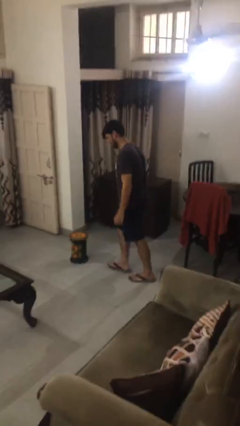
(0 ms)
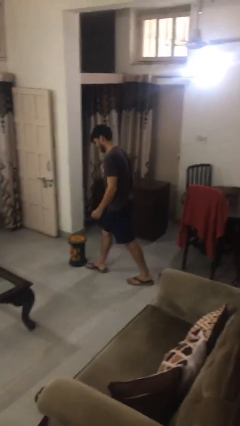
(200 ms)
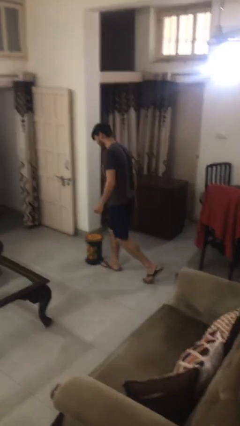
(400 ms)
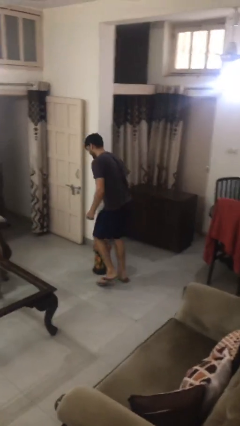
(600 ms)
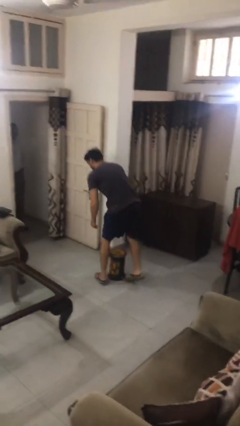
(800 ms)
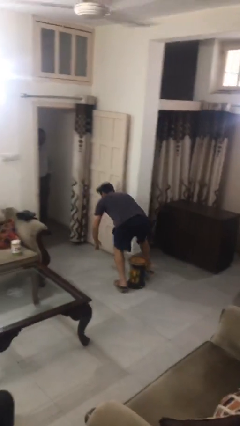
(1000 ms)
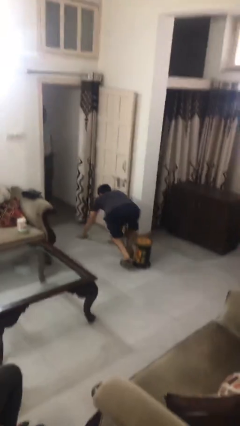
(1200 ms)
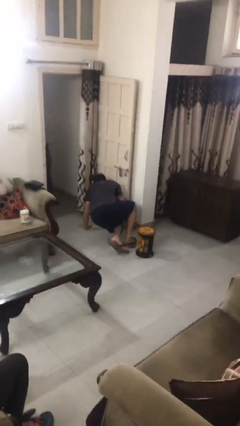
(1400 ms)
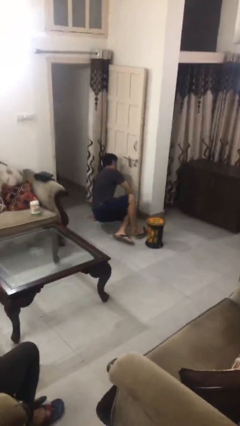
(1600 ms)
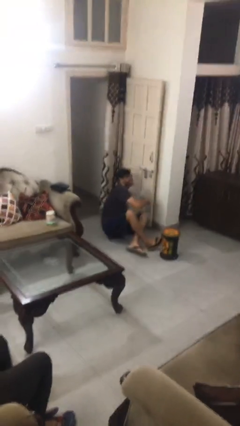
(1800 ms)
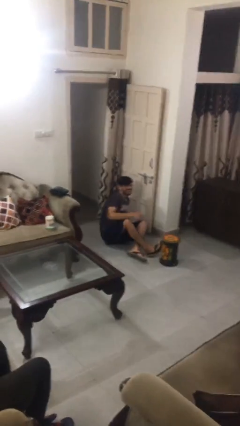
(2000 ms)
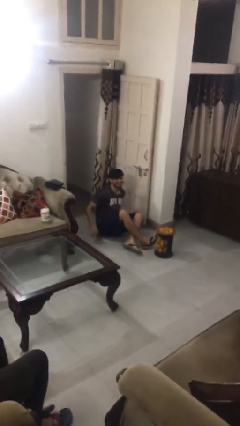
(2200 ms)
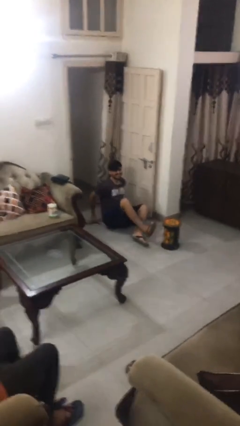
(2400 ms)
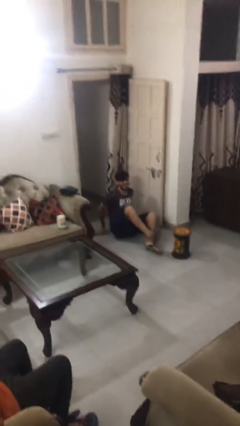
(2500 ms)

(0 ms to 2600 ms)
person trips on object on floor

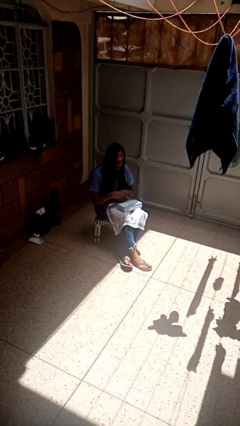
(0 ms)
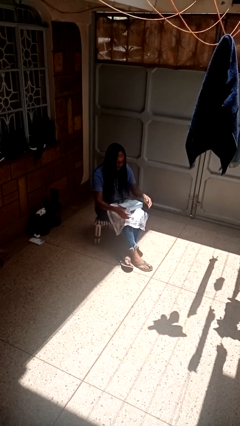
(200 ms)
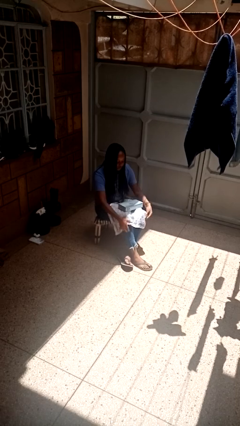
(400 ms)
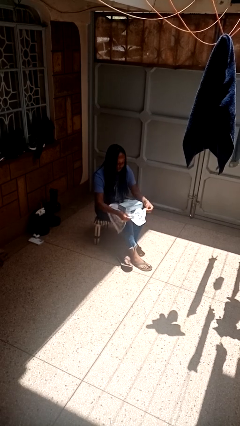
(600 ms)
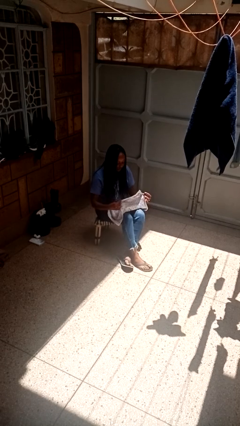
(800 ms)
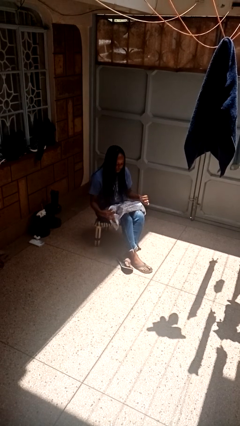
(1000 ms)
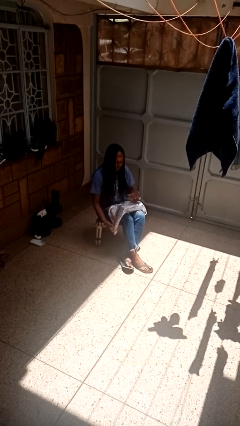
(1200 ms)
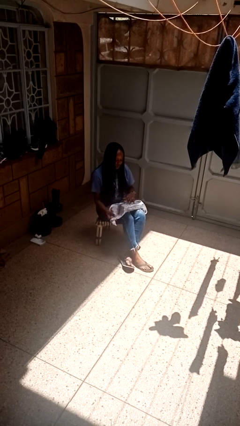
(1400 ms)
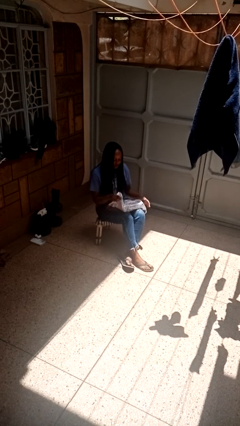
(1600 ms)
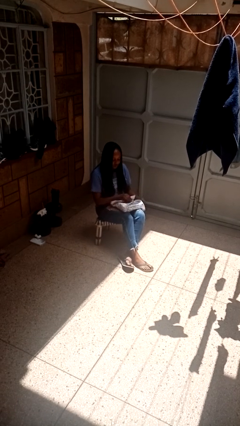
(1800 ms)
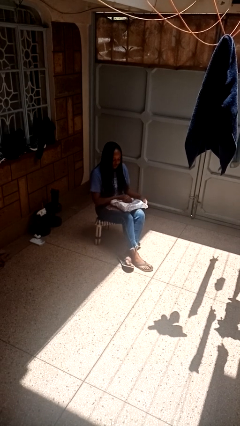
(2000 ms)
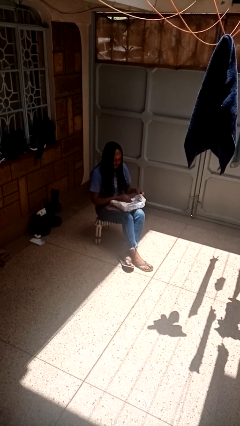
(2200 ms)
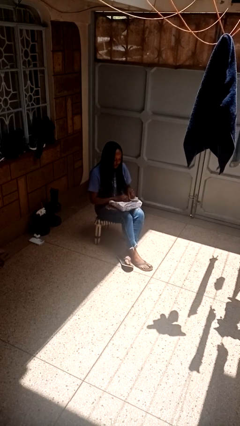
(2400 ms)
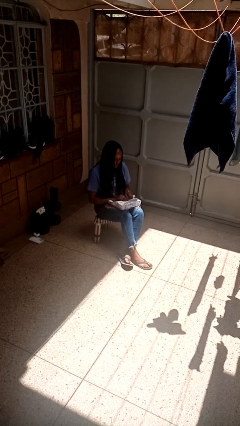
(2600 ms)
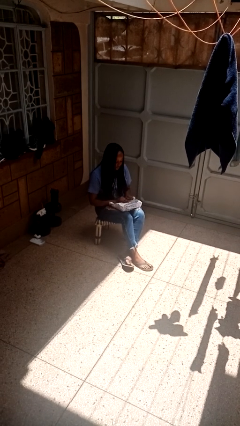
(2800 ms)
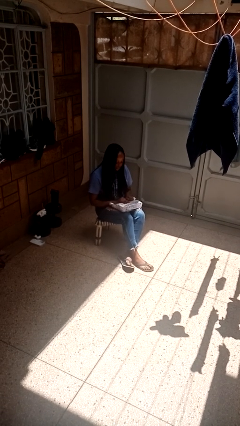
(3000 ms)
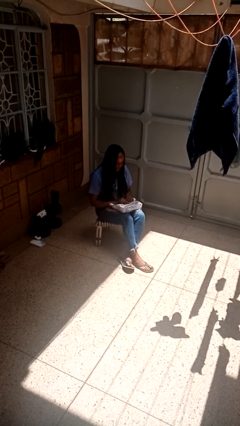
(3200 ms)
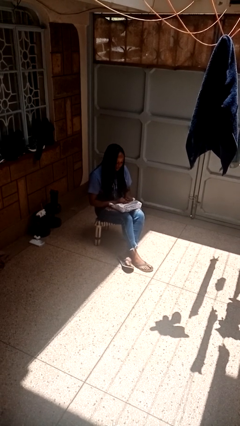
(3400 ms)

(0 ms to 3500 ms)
person wraps box

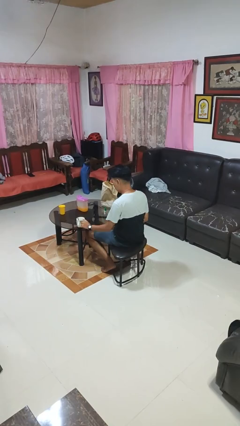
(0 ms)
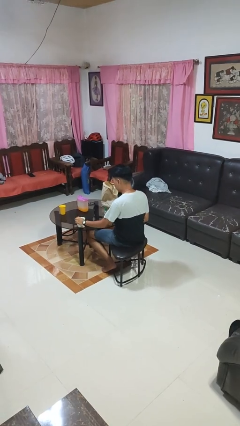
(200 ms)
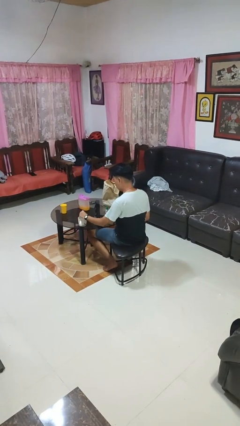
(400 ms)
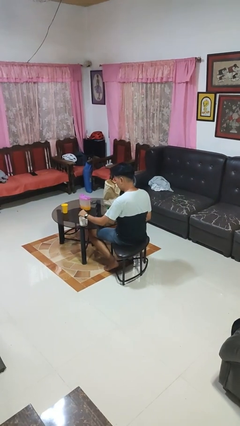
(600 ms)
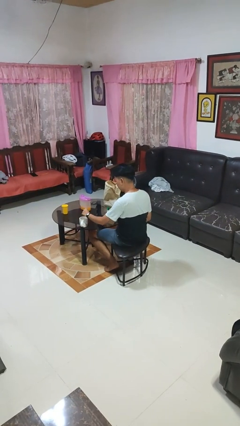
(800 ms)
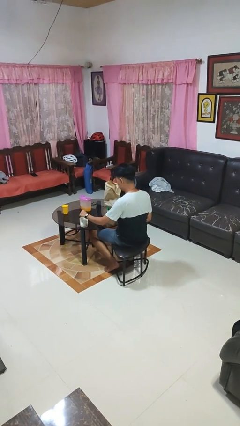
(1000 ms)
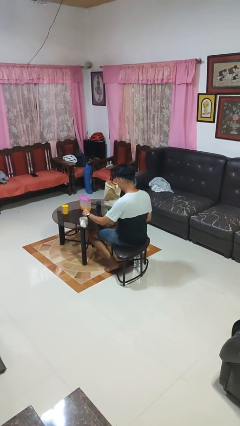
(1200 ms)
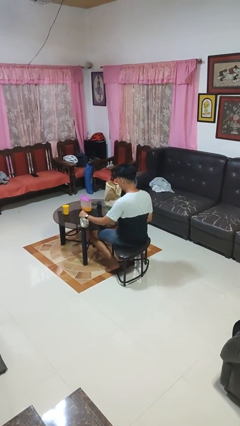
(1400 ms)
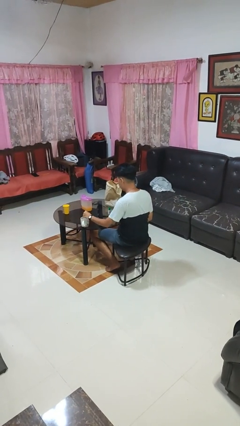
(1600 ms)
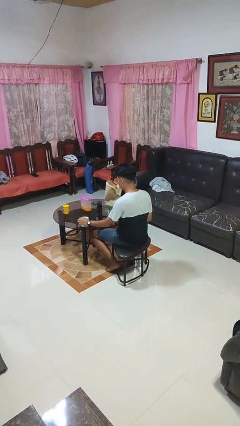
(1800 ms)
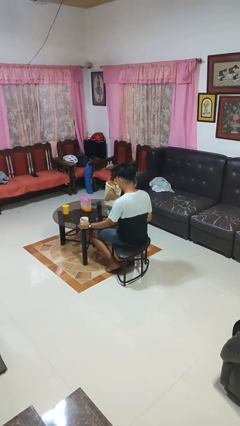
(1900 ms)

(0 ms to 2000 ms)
person stirs mug

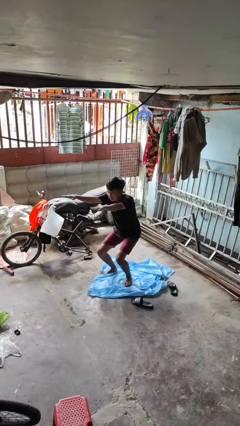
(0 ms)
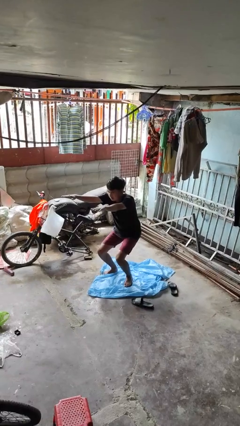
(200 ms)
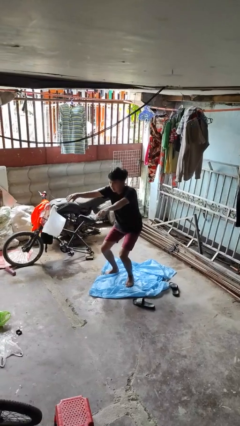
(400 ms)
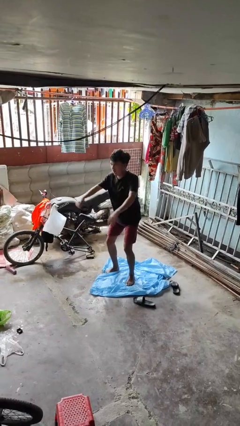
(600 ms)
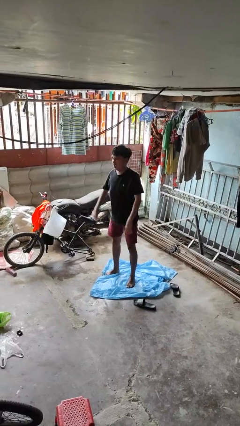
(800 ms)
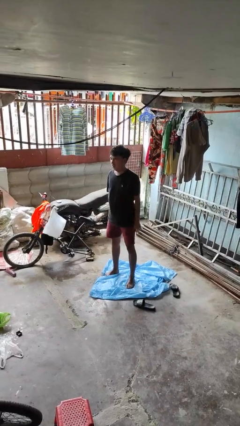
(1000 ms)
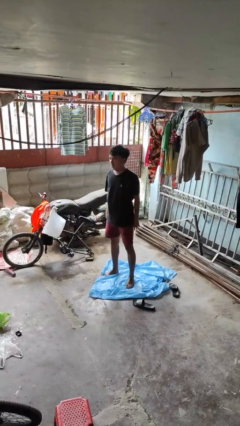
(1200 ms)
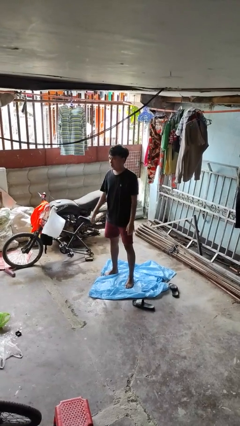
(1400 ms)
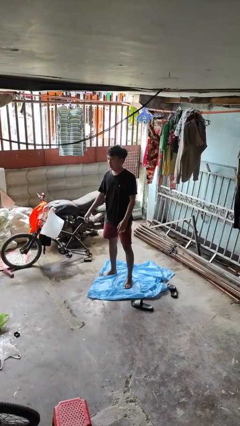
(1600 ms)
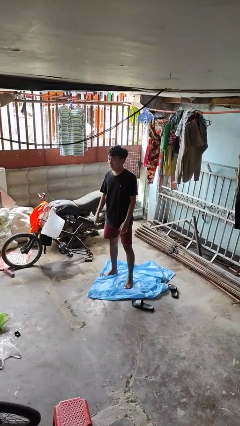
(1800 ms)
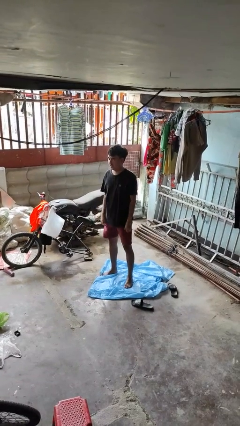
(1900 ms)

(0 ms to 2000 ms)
person stands up

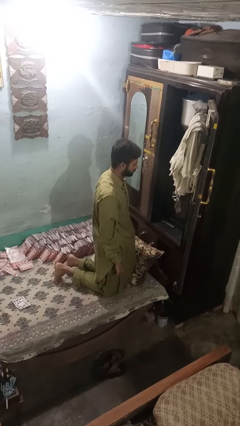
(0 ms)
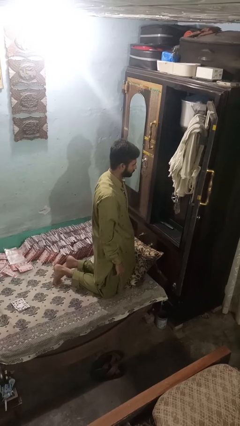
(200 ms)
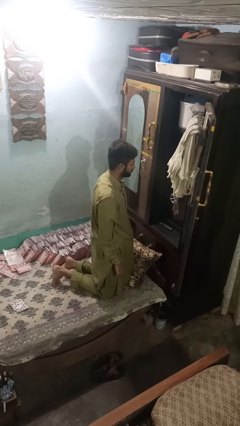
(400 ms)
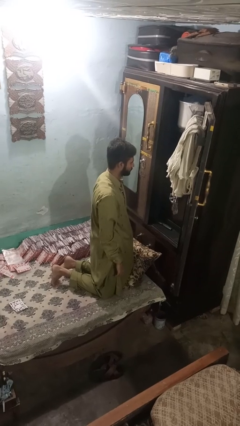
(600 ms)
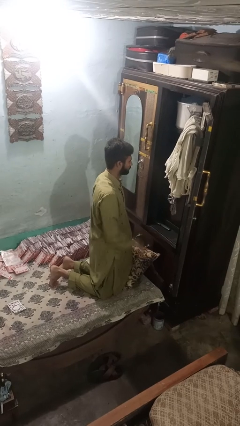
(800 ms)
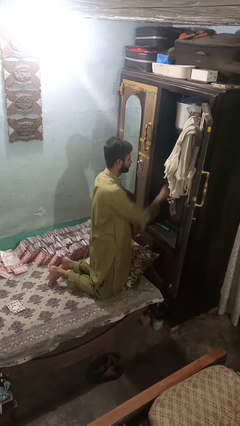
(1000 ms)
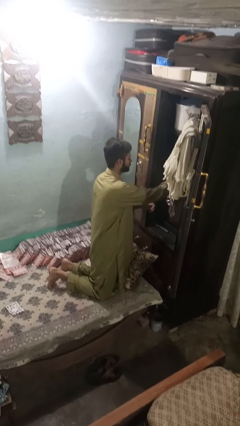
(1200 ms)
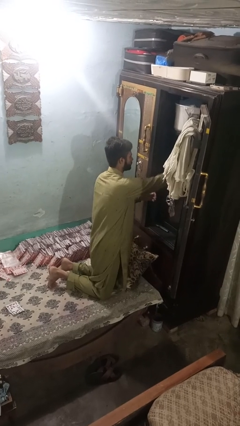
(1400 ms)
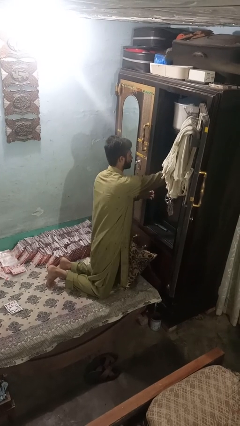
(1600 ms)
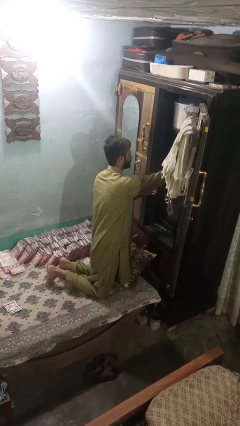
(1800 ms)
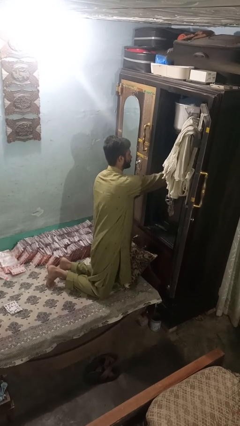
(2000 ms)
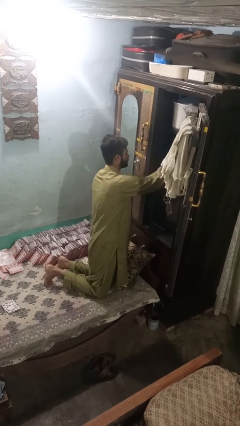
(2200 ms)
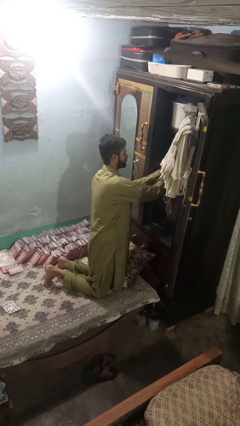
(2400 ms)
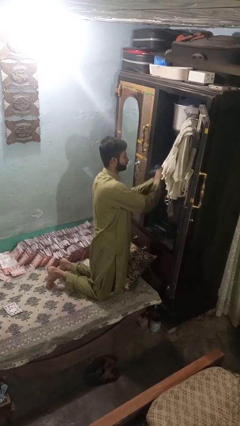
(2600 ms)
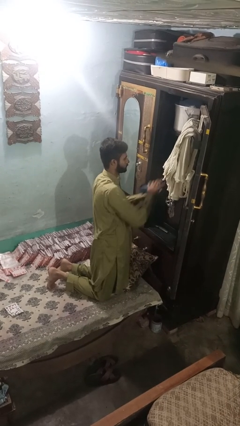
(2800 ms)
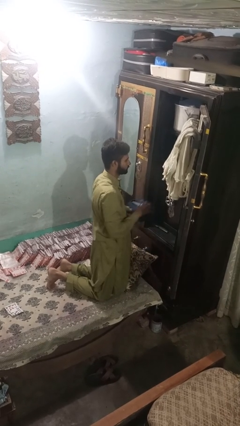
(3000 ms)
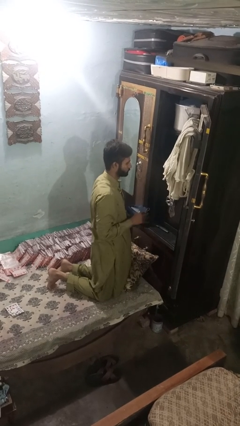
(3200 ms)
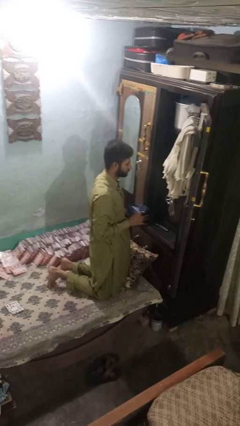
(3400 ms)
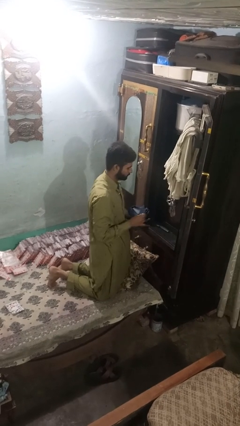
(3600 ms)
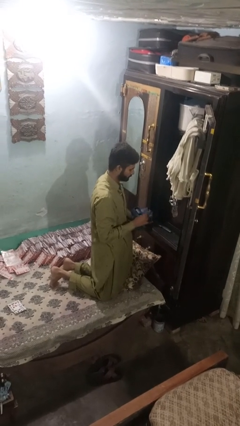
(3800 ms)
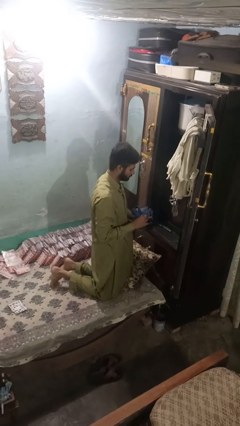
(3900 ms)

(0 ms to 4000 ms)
person takes clothes from dresser

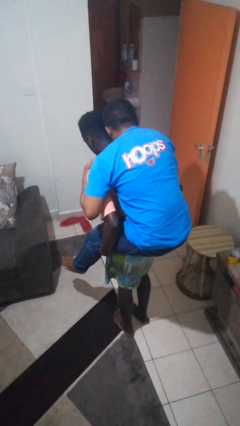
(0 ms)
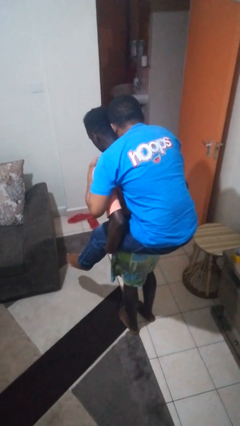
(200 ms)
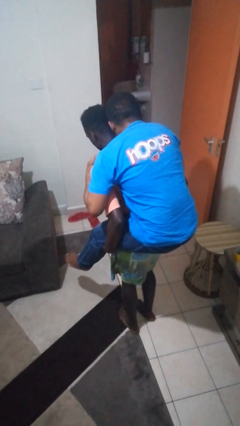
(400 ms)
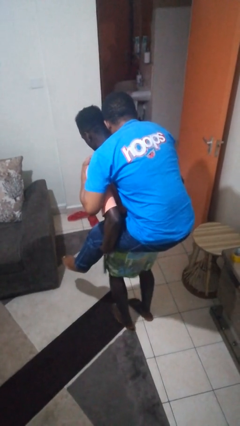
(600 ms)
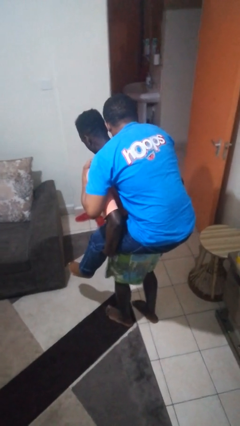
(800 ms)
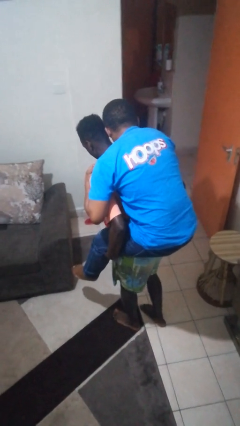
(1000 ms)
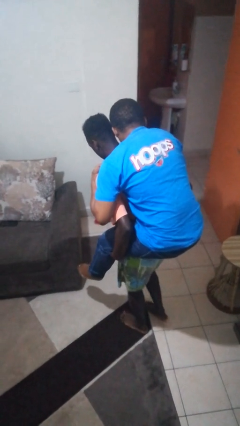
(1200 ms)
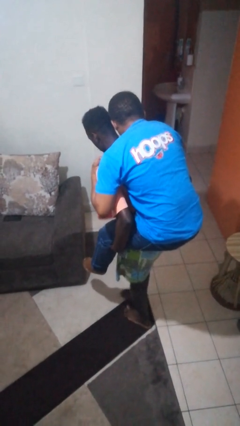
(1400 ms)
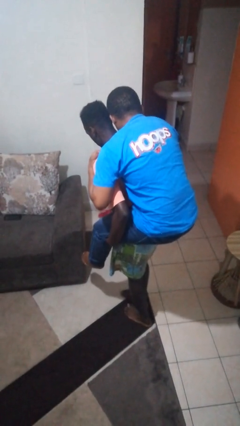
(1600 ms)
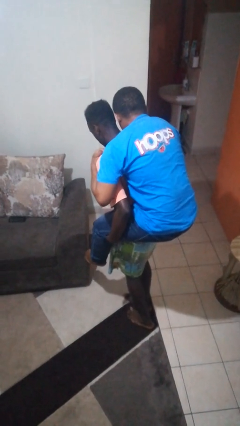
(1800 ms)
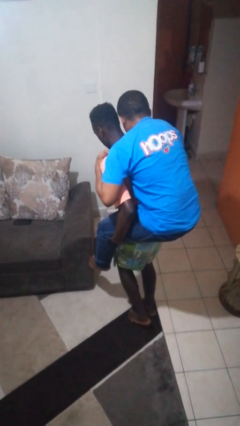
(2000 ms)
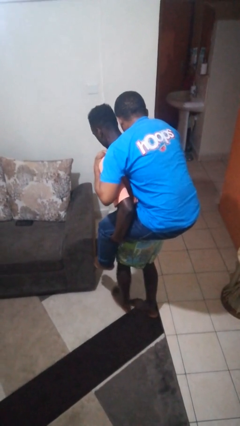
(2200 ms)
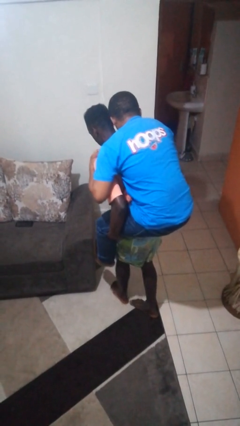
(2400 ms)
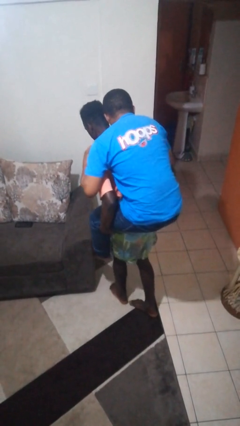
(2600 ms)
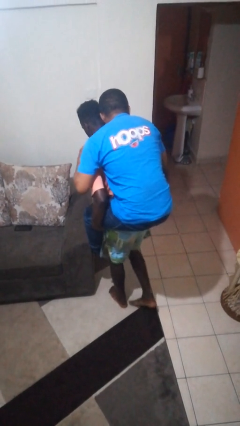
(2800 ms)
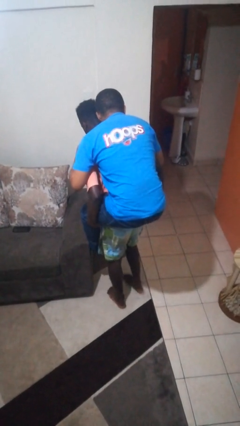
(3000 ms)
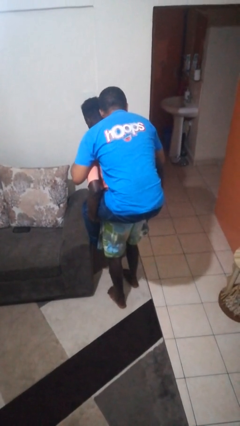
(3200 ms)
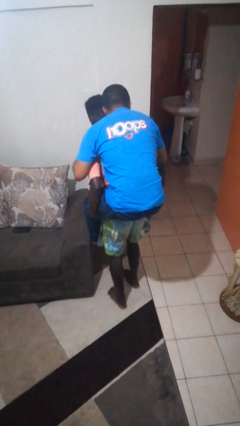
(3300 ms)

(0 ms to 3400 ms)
person carries person on back

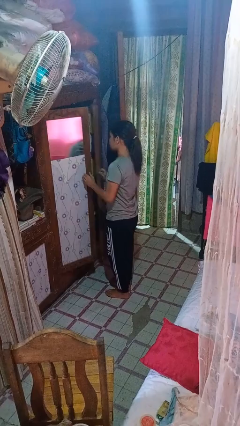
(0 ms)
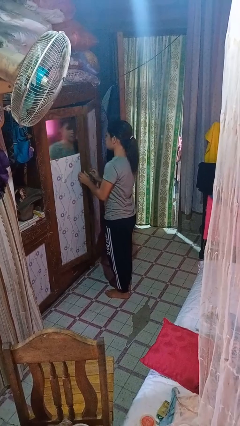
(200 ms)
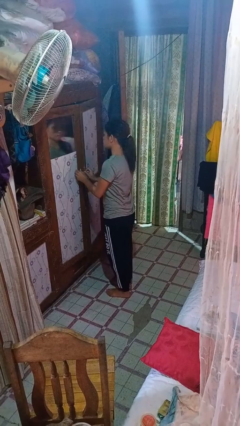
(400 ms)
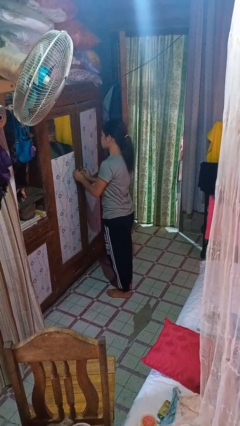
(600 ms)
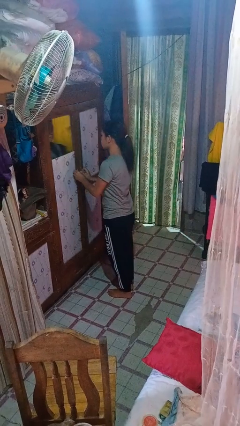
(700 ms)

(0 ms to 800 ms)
person closes closet door
